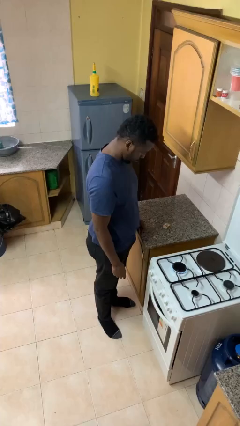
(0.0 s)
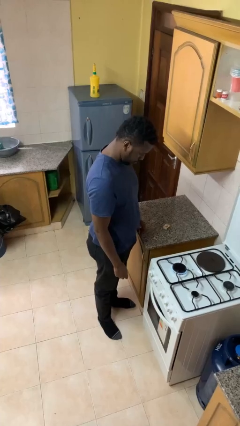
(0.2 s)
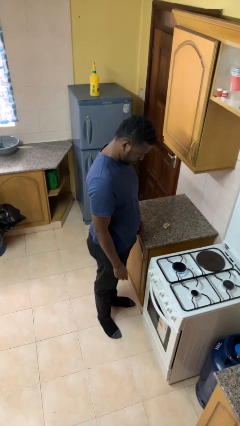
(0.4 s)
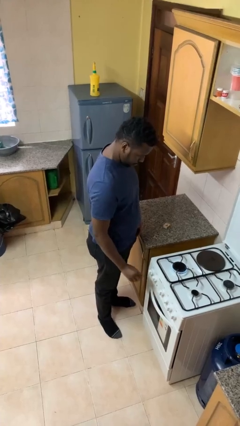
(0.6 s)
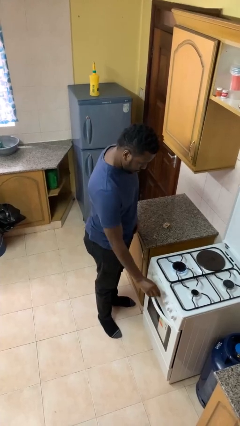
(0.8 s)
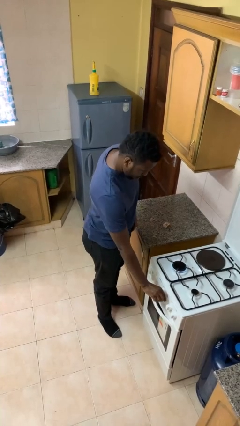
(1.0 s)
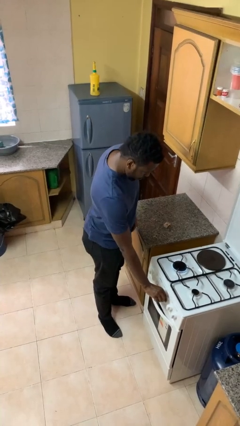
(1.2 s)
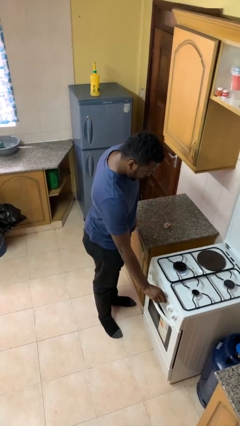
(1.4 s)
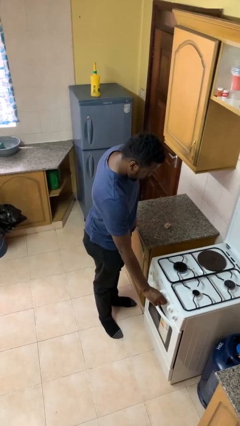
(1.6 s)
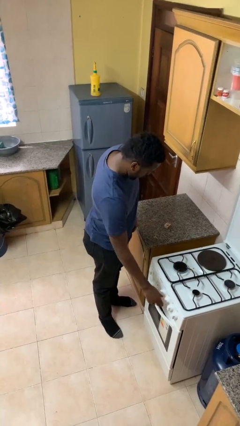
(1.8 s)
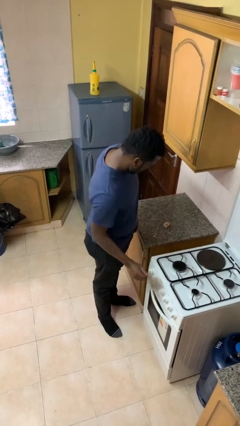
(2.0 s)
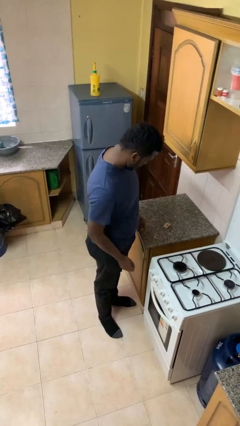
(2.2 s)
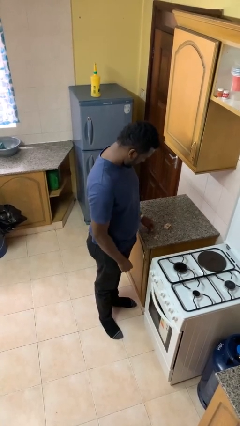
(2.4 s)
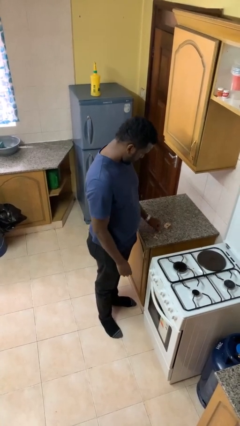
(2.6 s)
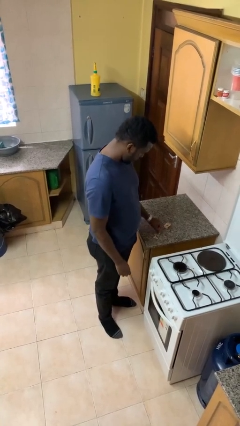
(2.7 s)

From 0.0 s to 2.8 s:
person turns off stovetop

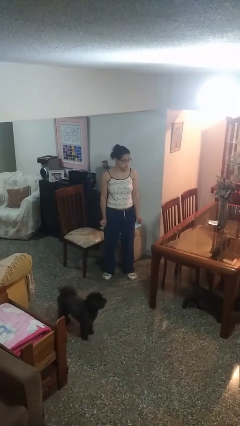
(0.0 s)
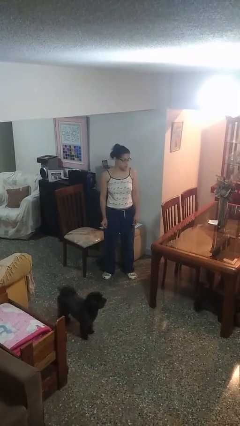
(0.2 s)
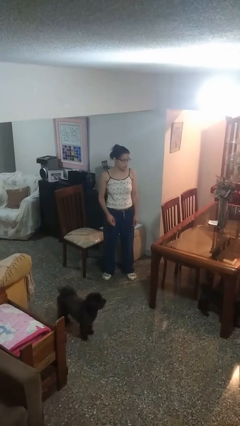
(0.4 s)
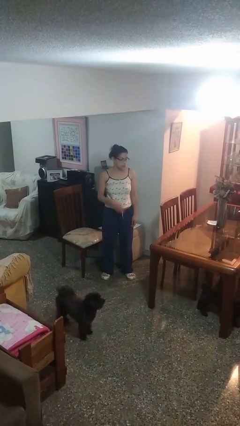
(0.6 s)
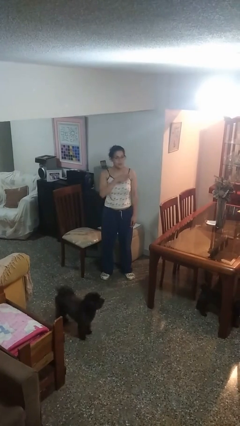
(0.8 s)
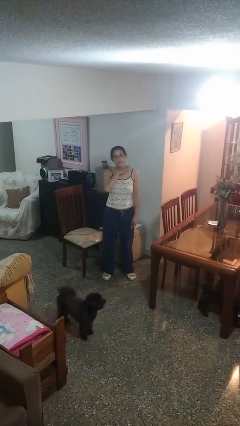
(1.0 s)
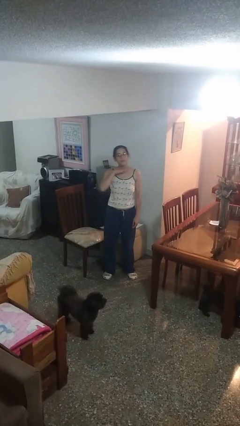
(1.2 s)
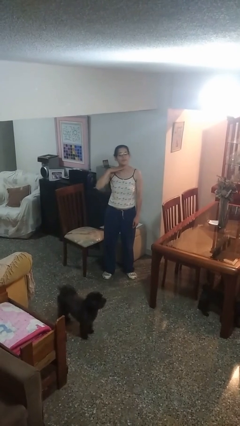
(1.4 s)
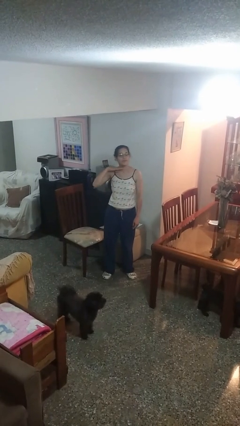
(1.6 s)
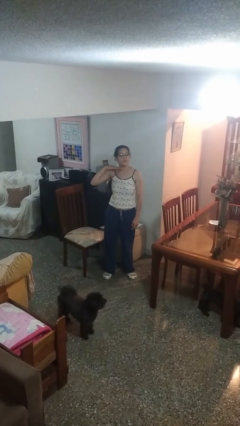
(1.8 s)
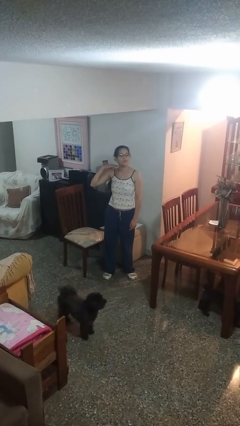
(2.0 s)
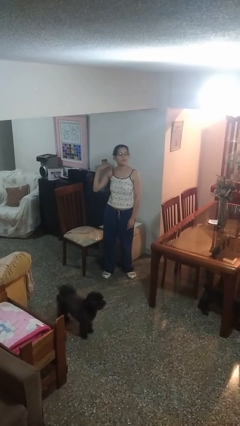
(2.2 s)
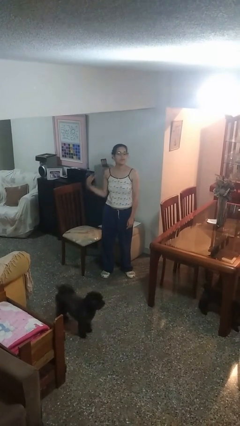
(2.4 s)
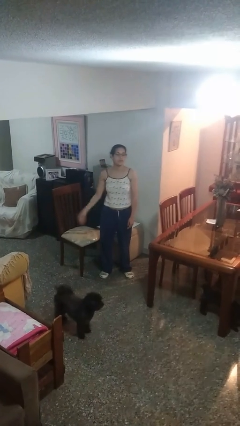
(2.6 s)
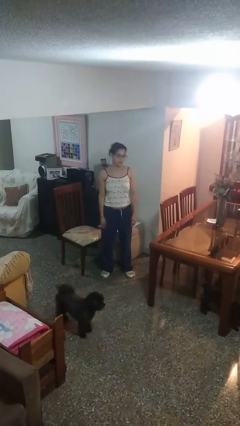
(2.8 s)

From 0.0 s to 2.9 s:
person gestures cut

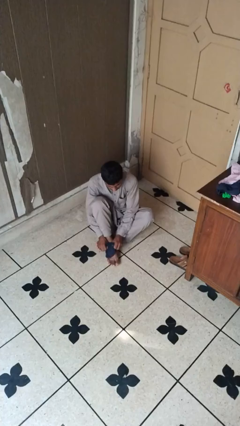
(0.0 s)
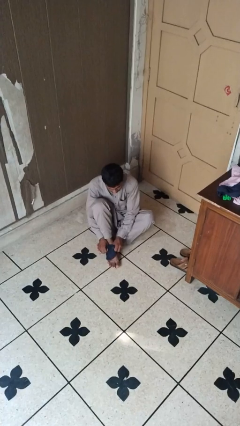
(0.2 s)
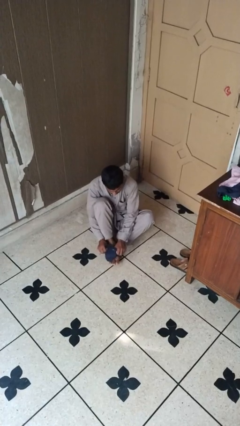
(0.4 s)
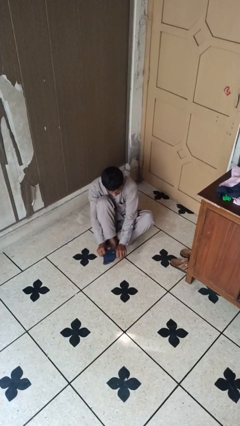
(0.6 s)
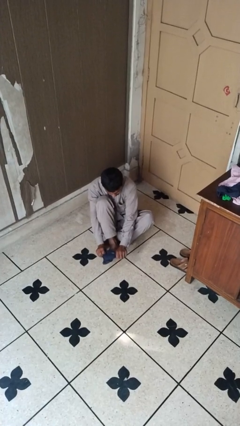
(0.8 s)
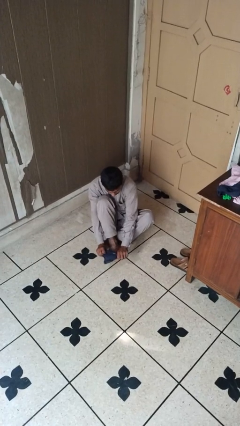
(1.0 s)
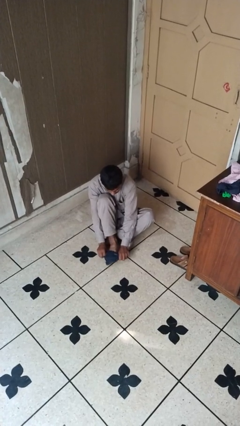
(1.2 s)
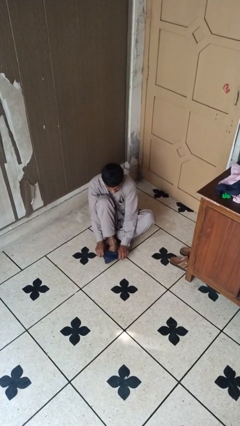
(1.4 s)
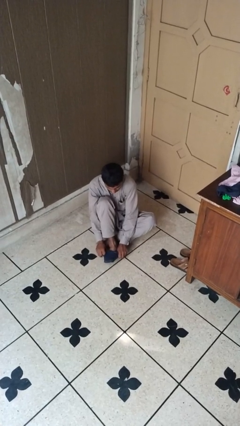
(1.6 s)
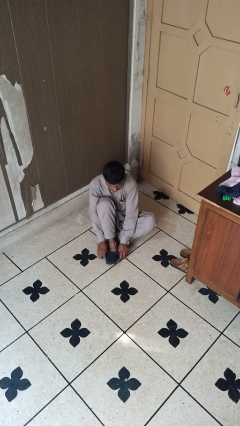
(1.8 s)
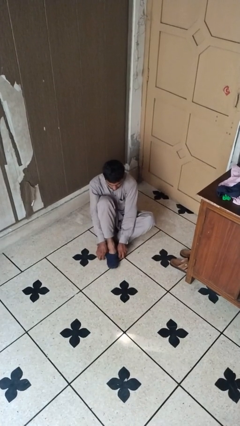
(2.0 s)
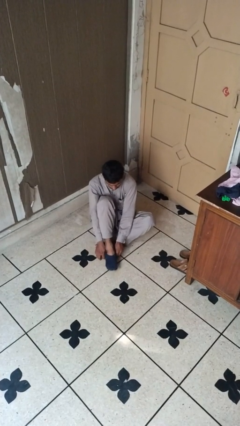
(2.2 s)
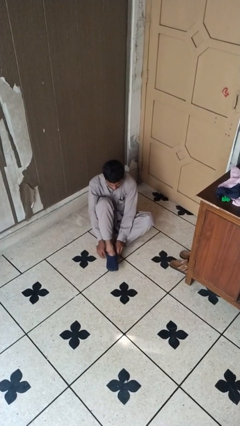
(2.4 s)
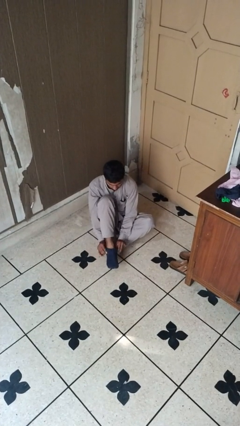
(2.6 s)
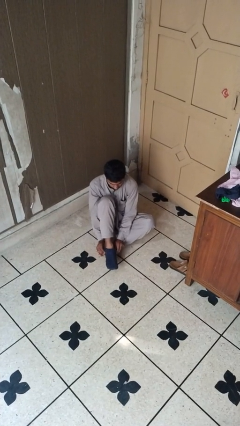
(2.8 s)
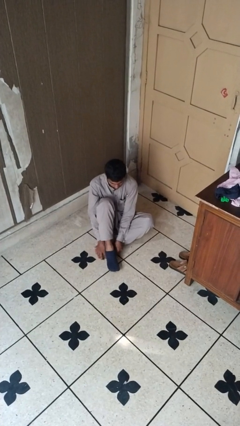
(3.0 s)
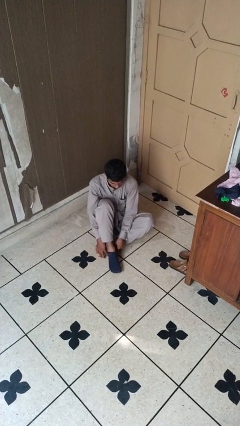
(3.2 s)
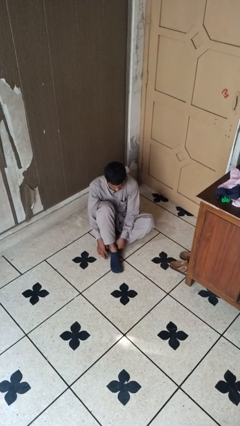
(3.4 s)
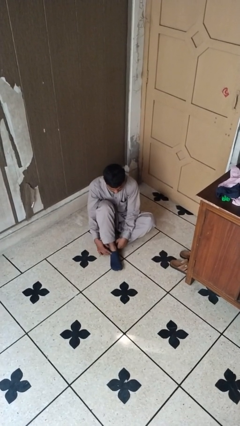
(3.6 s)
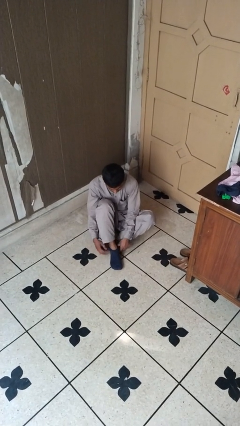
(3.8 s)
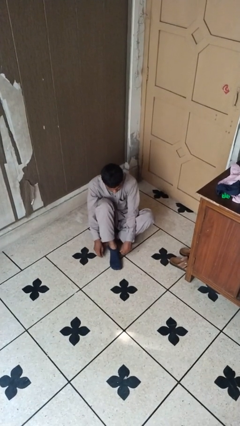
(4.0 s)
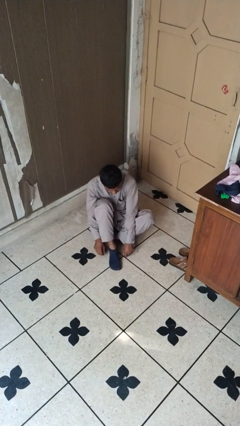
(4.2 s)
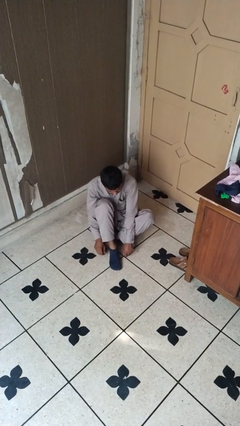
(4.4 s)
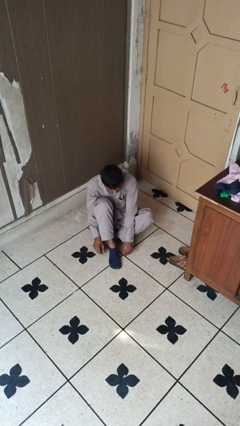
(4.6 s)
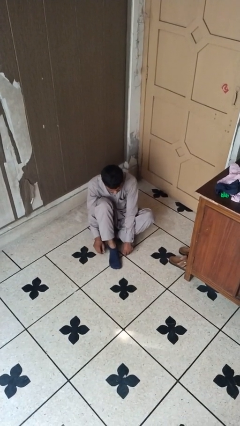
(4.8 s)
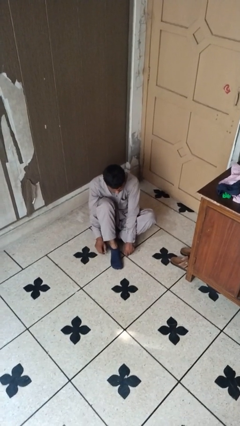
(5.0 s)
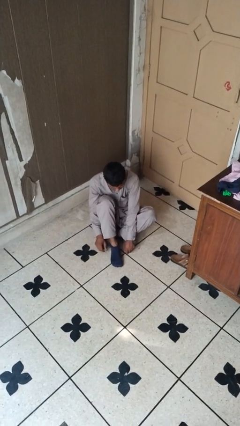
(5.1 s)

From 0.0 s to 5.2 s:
person puts on socks

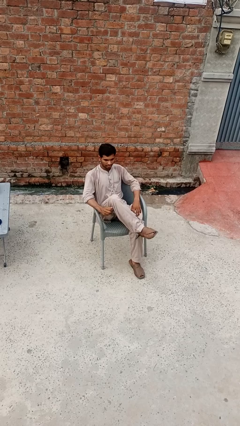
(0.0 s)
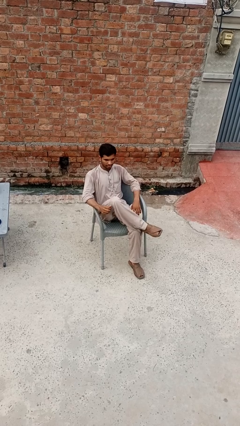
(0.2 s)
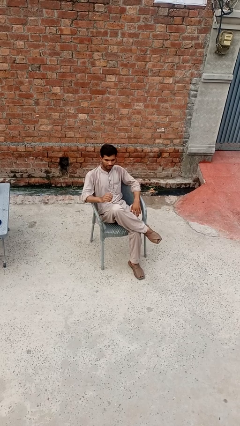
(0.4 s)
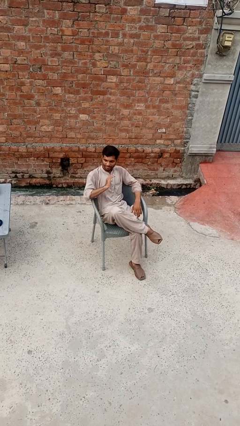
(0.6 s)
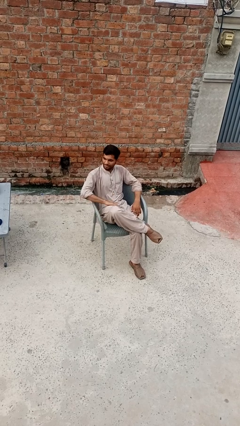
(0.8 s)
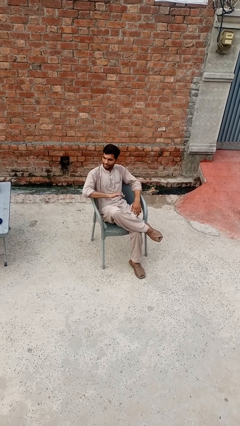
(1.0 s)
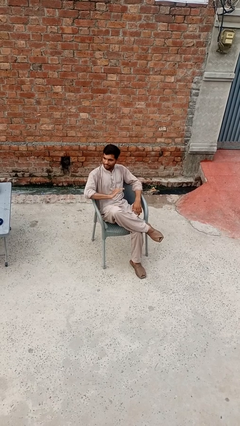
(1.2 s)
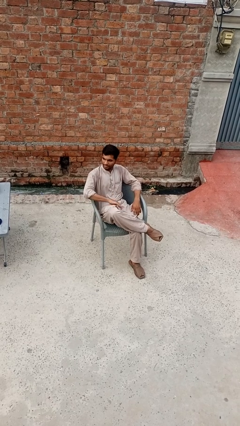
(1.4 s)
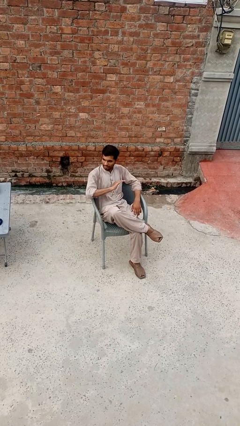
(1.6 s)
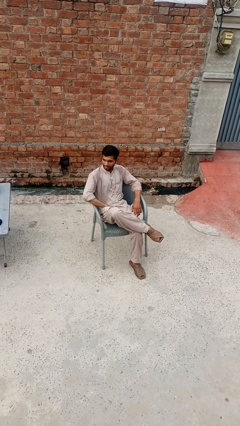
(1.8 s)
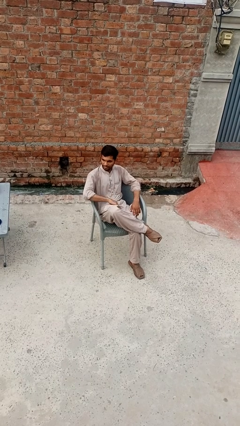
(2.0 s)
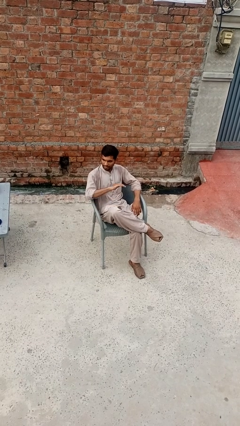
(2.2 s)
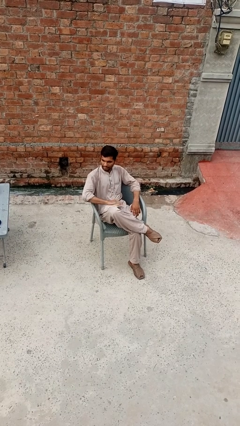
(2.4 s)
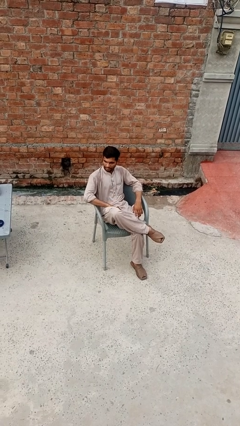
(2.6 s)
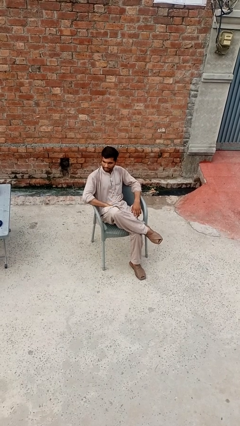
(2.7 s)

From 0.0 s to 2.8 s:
person slaps hands on thighs

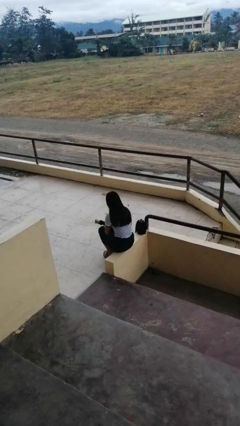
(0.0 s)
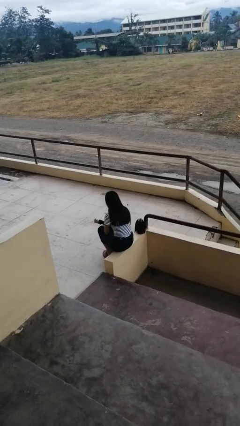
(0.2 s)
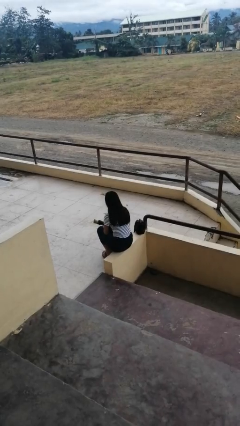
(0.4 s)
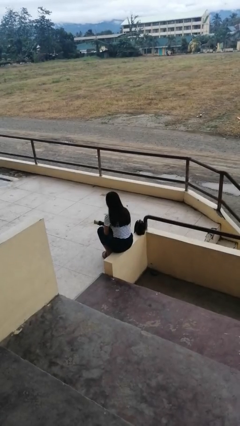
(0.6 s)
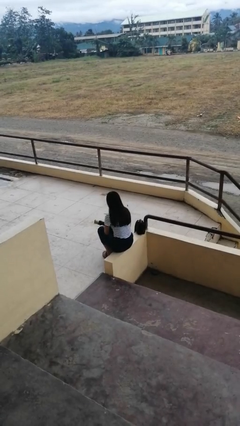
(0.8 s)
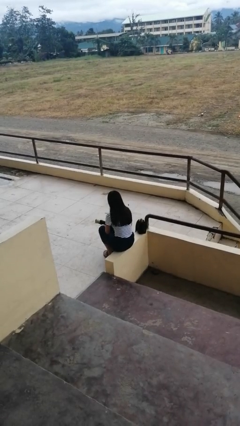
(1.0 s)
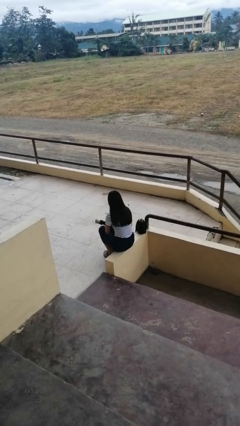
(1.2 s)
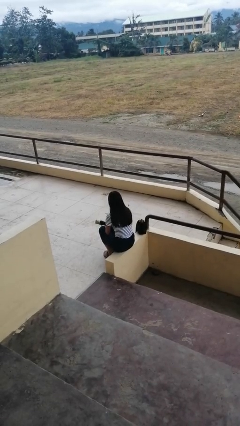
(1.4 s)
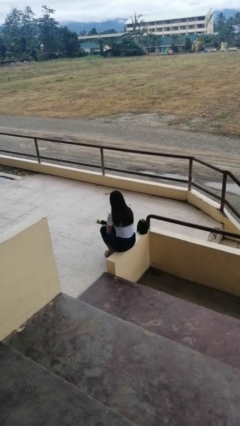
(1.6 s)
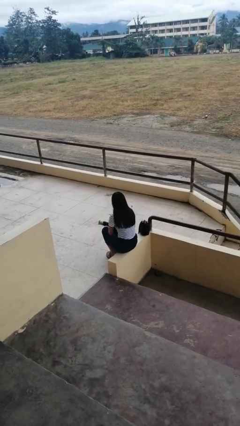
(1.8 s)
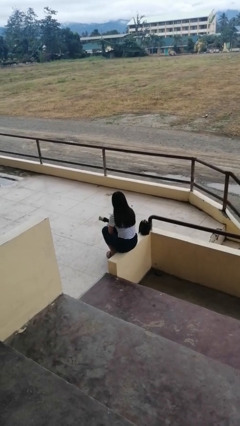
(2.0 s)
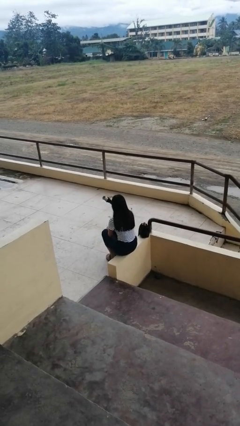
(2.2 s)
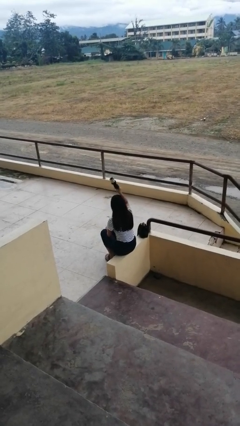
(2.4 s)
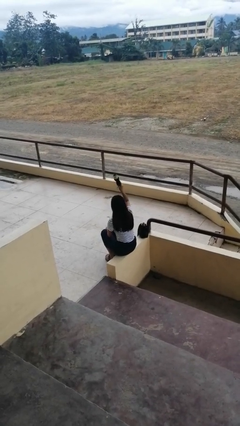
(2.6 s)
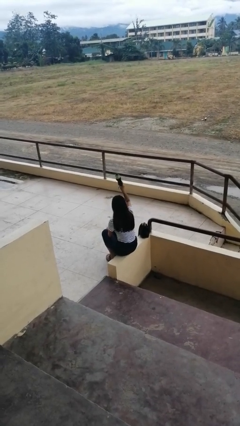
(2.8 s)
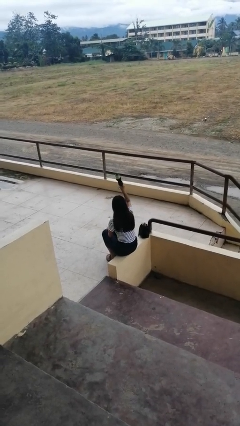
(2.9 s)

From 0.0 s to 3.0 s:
person holds object above head

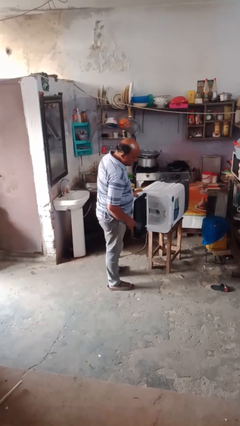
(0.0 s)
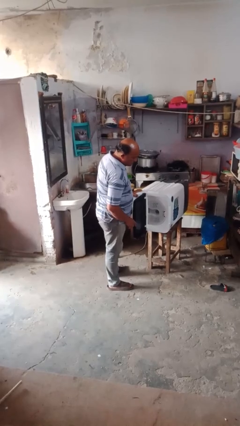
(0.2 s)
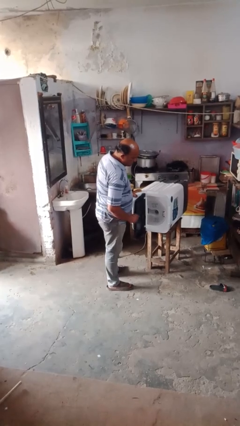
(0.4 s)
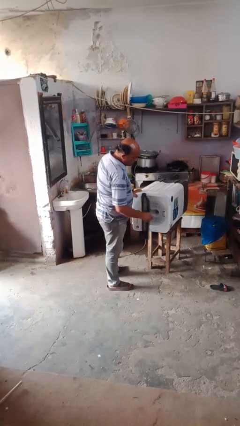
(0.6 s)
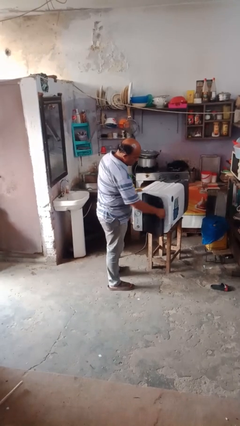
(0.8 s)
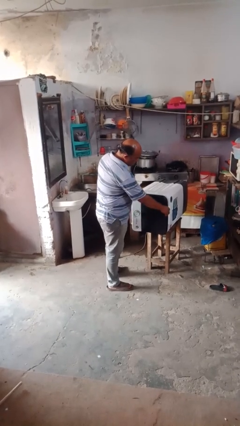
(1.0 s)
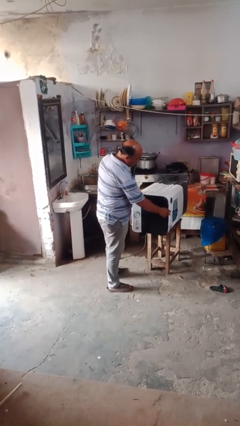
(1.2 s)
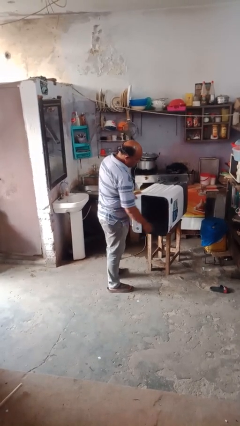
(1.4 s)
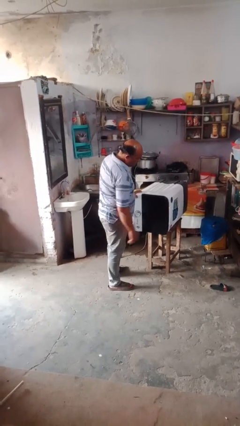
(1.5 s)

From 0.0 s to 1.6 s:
person closes dishwasher
